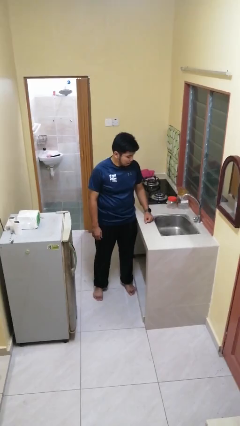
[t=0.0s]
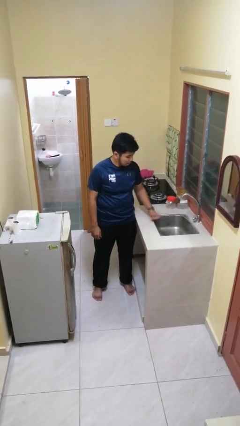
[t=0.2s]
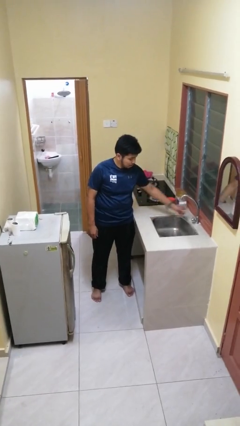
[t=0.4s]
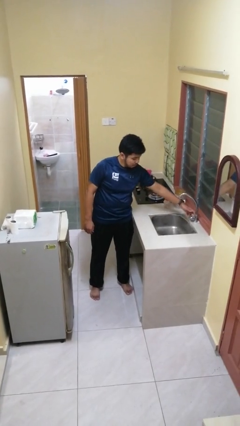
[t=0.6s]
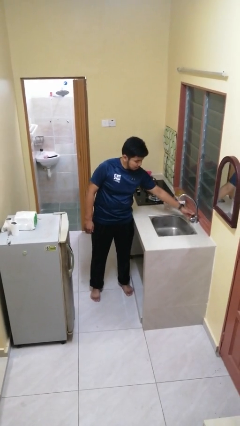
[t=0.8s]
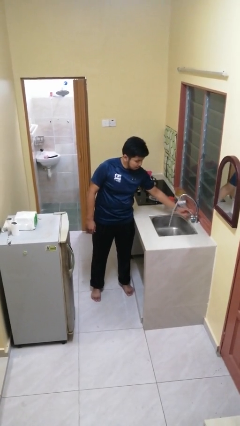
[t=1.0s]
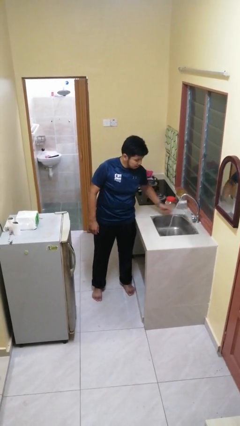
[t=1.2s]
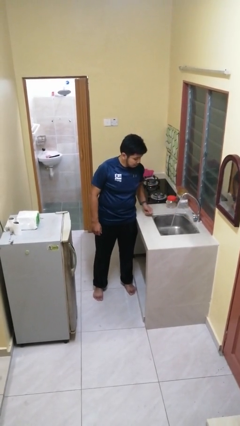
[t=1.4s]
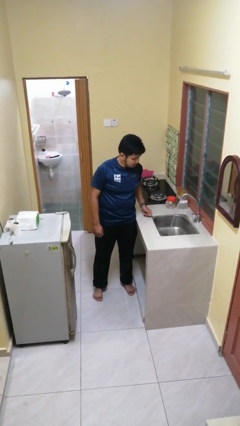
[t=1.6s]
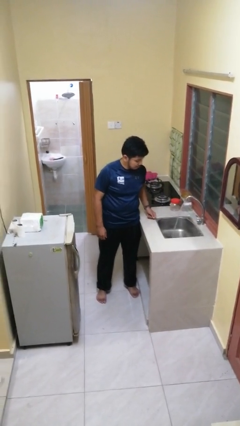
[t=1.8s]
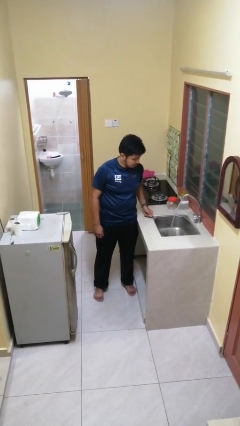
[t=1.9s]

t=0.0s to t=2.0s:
person turns on faucet

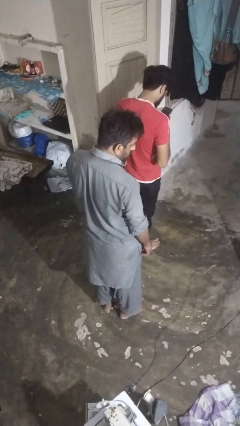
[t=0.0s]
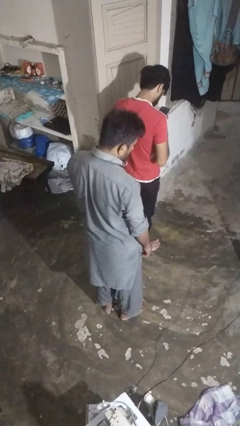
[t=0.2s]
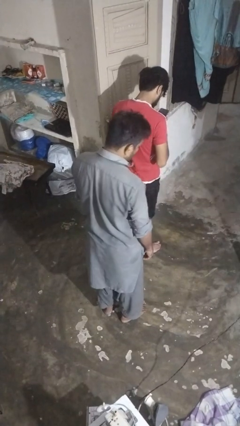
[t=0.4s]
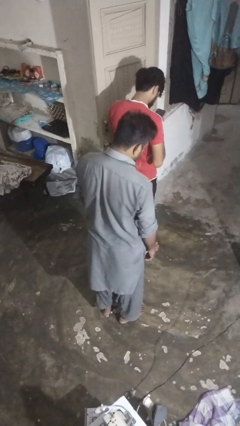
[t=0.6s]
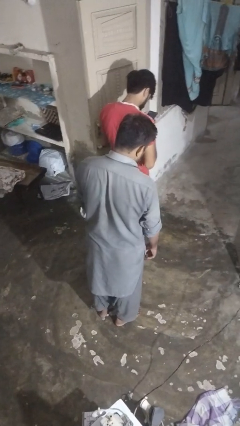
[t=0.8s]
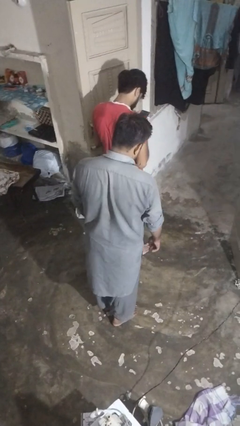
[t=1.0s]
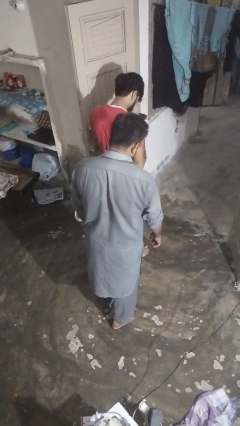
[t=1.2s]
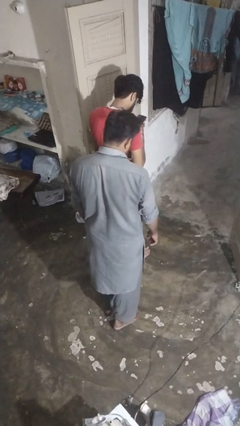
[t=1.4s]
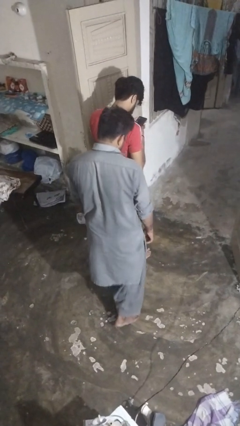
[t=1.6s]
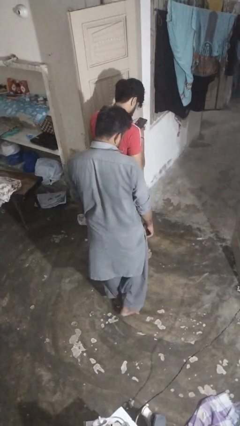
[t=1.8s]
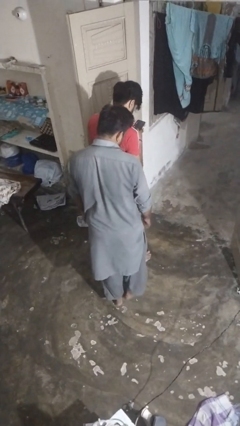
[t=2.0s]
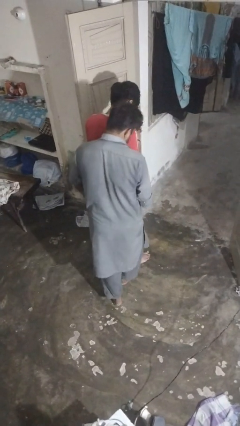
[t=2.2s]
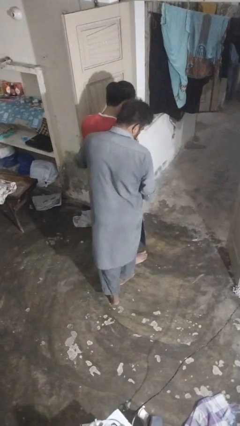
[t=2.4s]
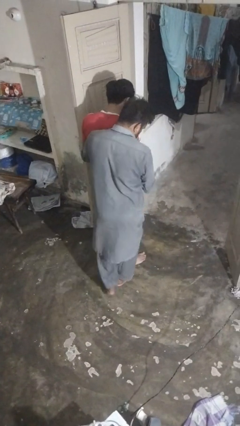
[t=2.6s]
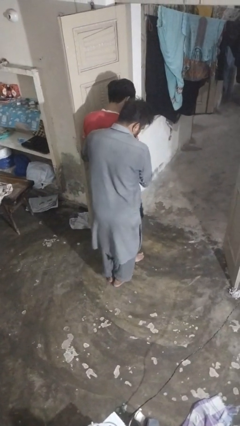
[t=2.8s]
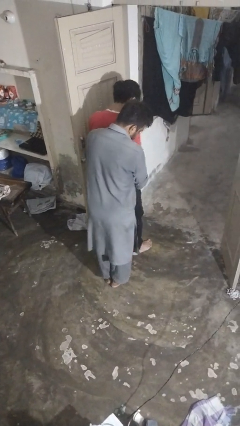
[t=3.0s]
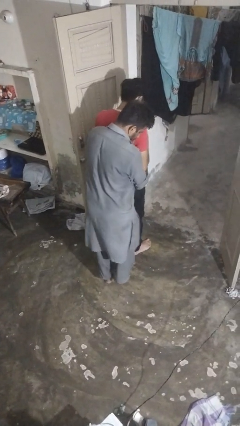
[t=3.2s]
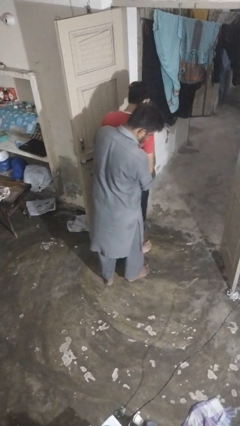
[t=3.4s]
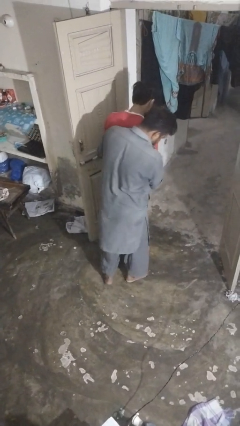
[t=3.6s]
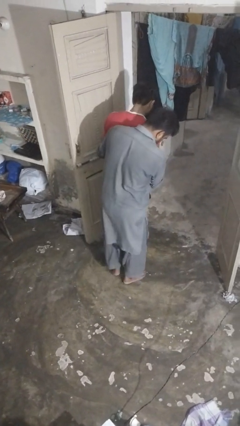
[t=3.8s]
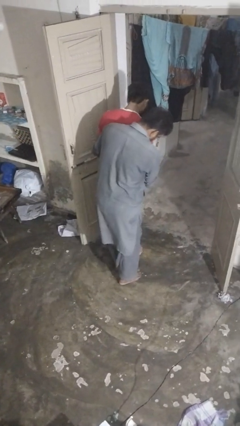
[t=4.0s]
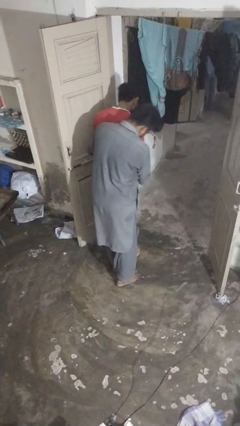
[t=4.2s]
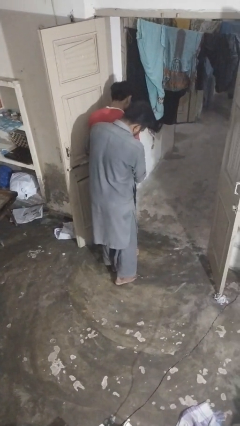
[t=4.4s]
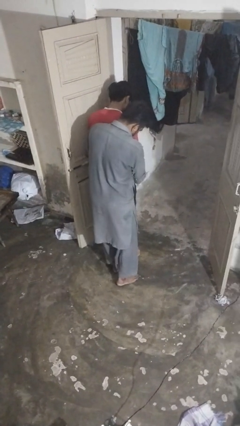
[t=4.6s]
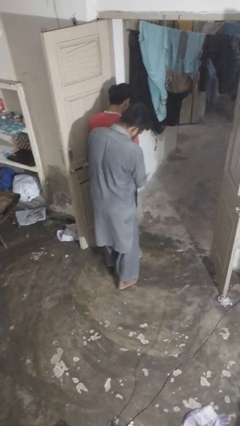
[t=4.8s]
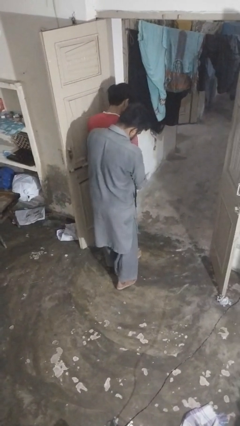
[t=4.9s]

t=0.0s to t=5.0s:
person bumps into person

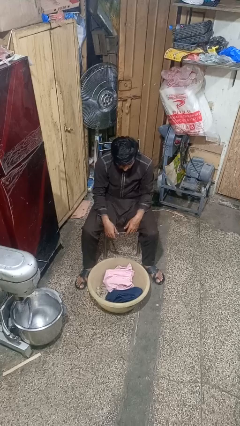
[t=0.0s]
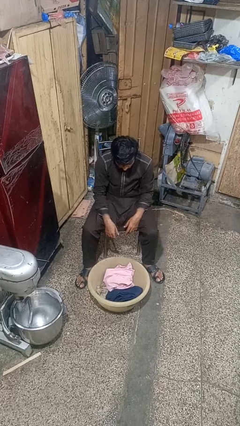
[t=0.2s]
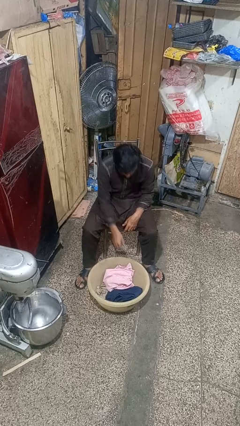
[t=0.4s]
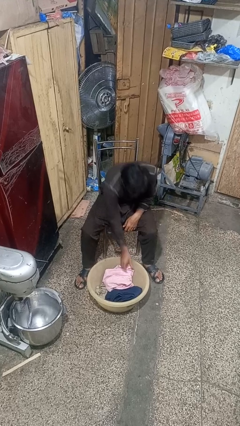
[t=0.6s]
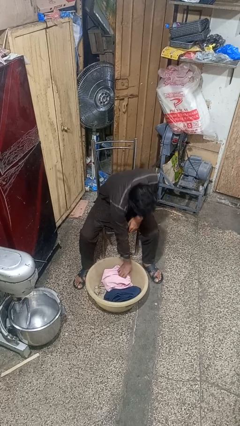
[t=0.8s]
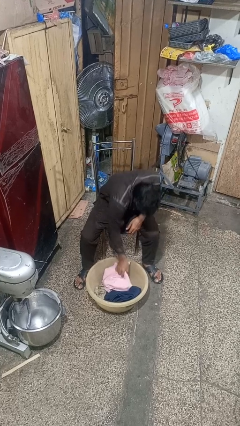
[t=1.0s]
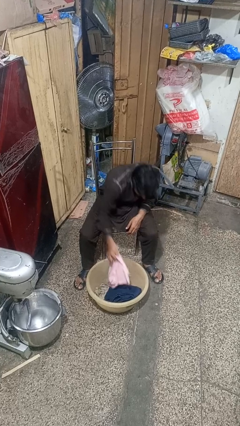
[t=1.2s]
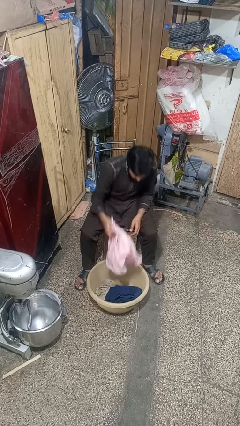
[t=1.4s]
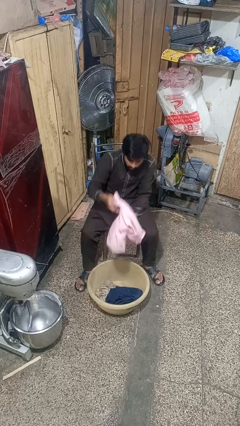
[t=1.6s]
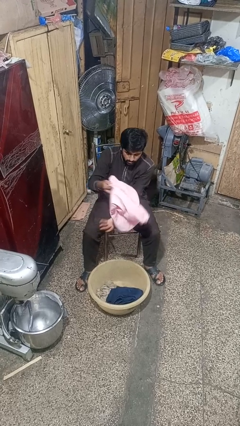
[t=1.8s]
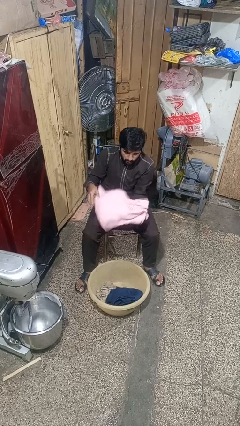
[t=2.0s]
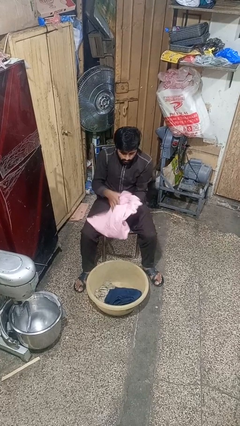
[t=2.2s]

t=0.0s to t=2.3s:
person folds shirt

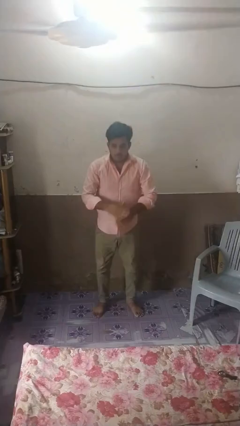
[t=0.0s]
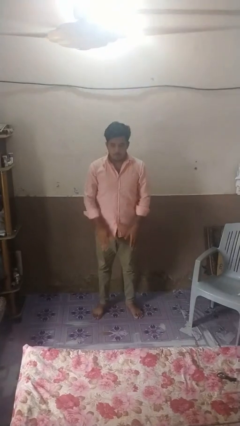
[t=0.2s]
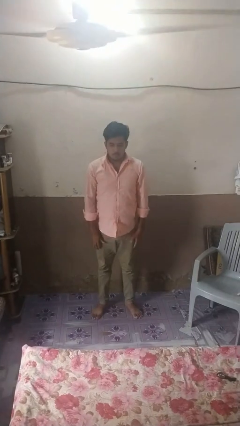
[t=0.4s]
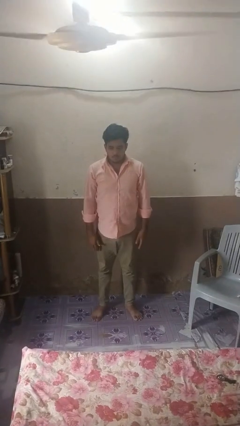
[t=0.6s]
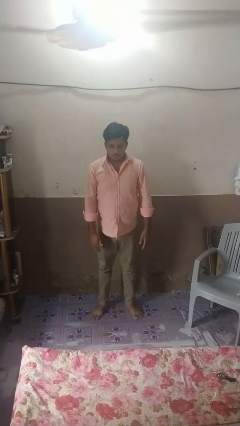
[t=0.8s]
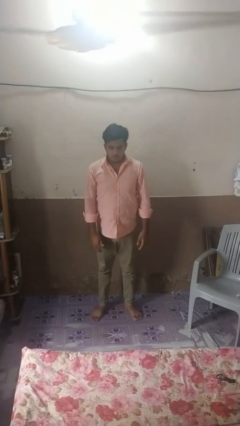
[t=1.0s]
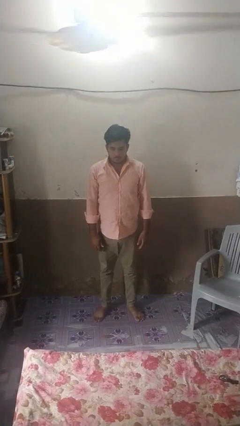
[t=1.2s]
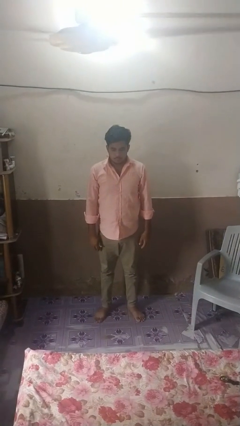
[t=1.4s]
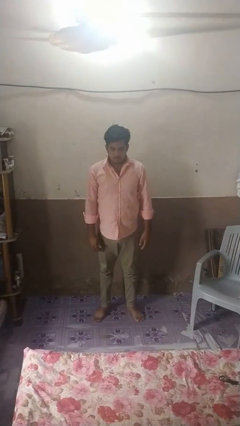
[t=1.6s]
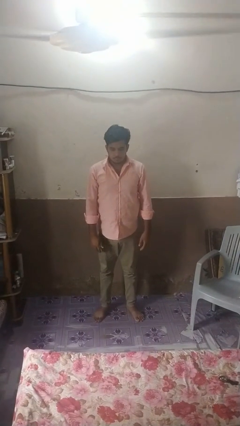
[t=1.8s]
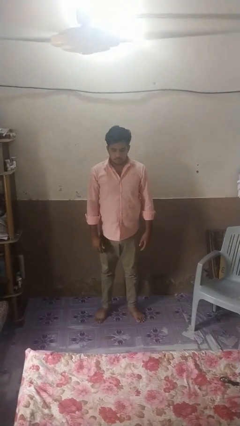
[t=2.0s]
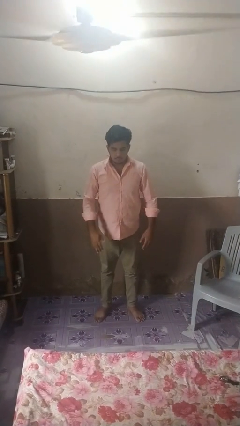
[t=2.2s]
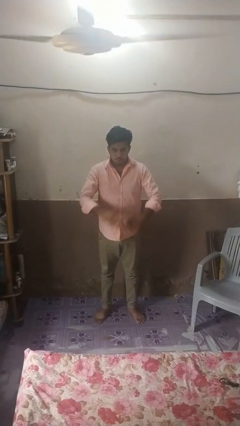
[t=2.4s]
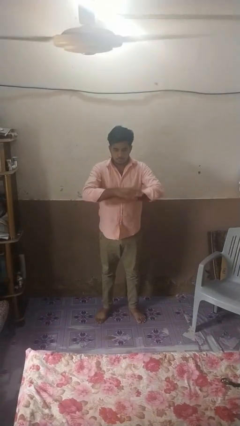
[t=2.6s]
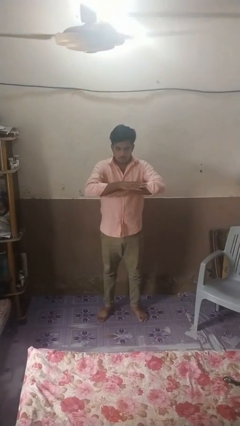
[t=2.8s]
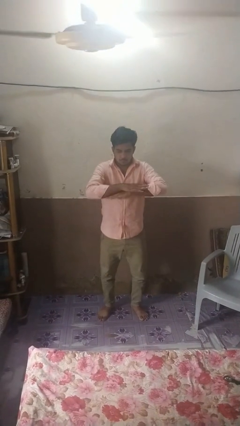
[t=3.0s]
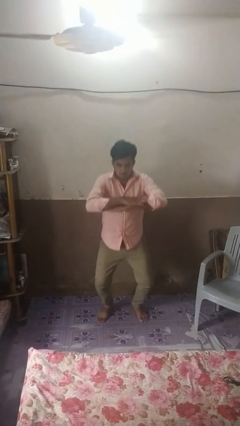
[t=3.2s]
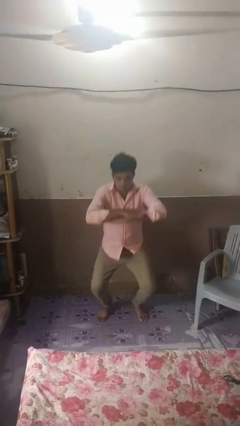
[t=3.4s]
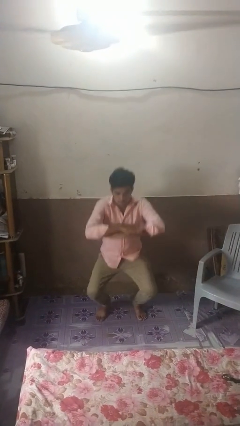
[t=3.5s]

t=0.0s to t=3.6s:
person stands up

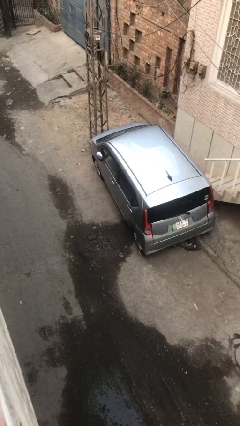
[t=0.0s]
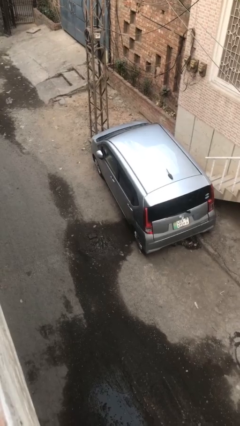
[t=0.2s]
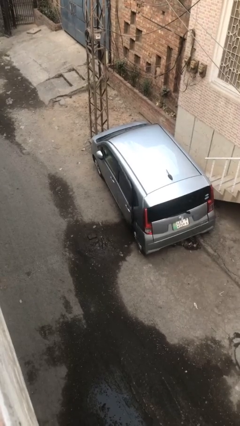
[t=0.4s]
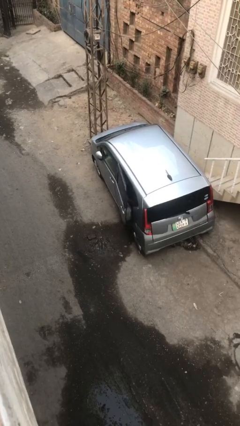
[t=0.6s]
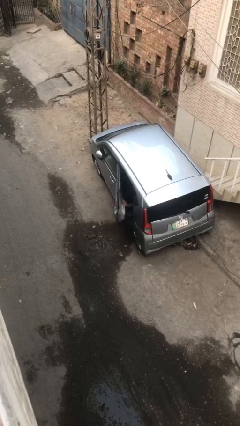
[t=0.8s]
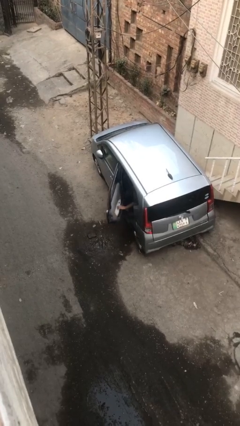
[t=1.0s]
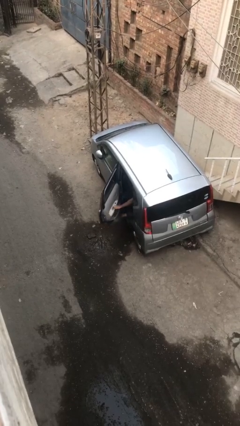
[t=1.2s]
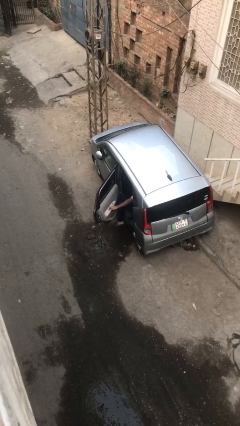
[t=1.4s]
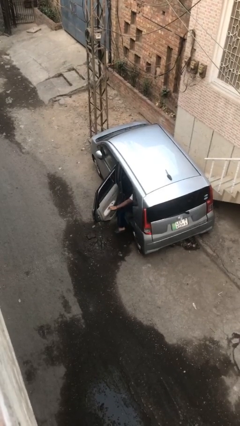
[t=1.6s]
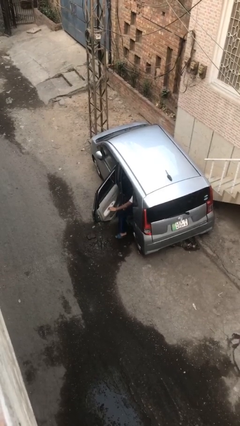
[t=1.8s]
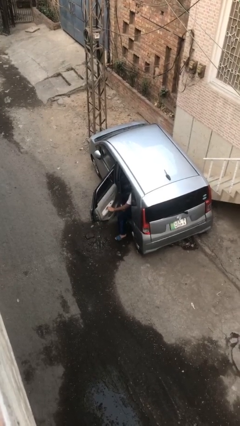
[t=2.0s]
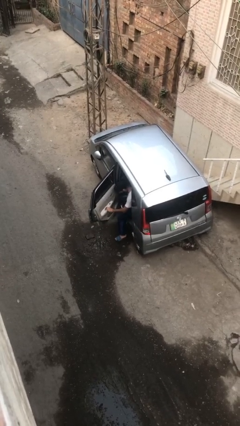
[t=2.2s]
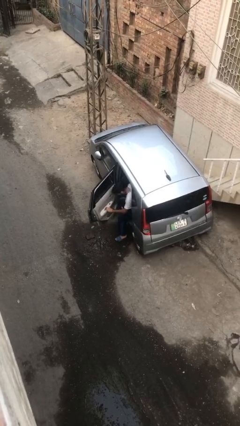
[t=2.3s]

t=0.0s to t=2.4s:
person opens car door

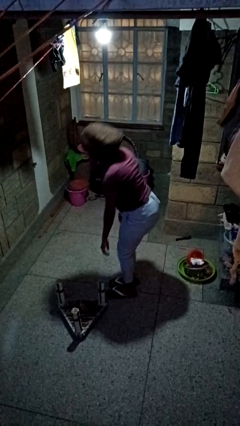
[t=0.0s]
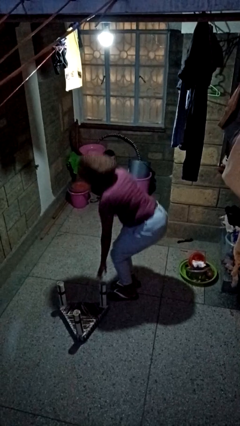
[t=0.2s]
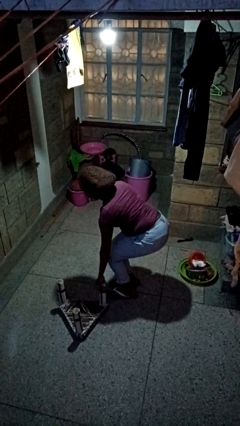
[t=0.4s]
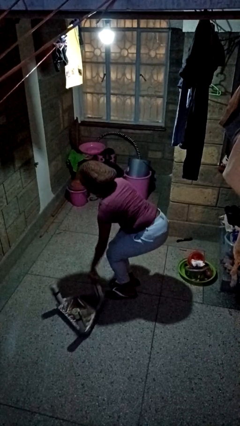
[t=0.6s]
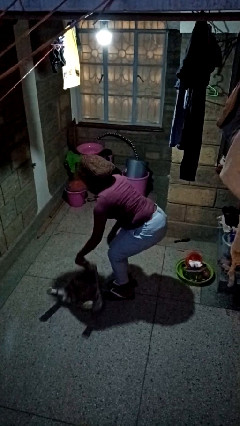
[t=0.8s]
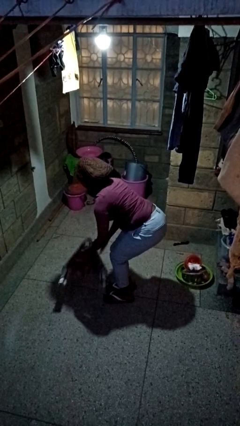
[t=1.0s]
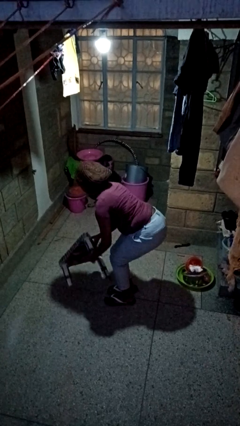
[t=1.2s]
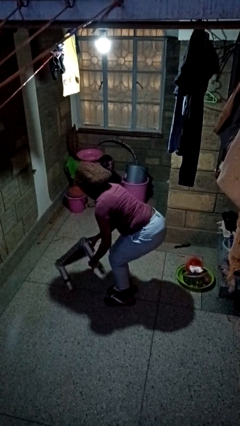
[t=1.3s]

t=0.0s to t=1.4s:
person sets upright furniture

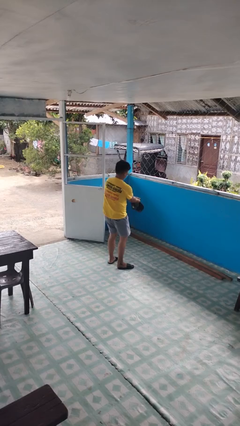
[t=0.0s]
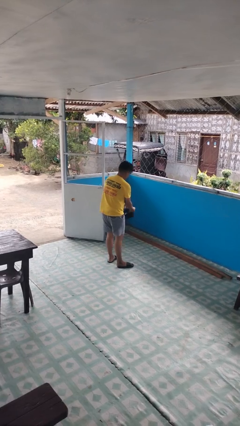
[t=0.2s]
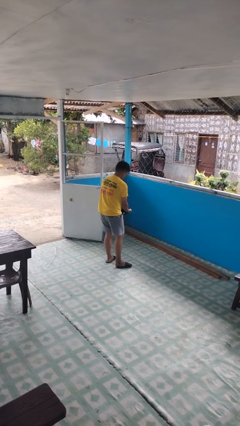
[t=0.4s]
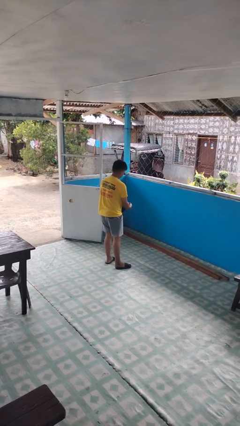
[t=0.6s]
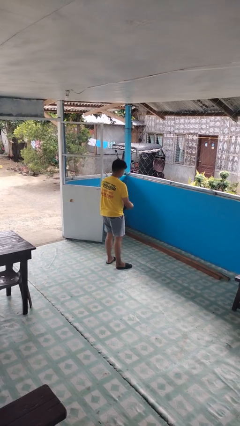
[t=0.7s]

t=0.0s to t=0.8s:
person catches dropped object
